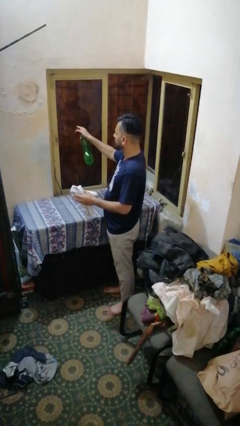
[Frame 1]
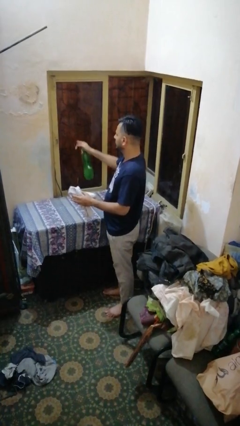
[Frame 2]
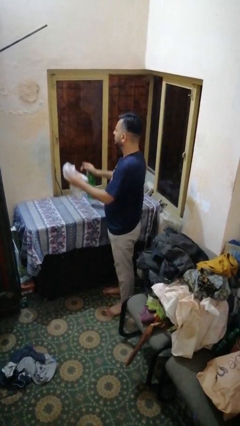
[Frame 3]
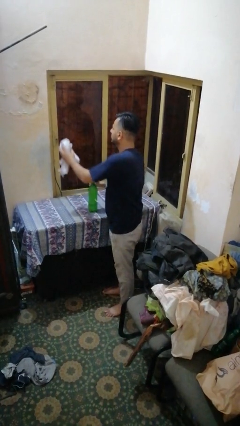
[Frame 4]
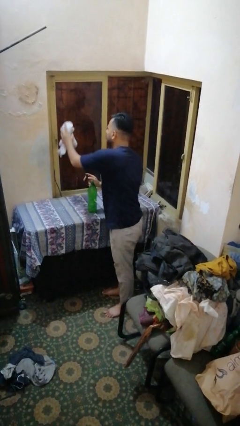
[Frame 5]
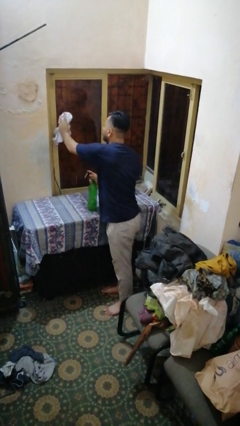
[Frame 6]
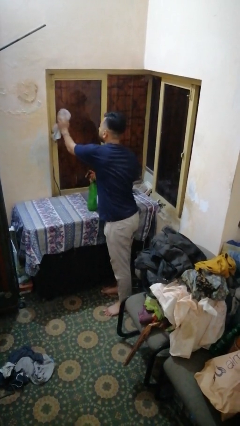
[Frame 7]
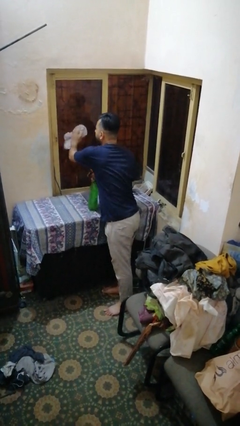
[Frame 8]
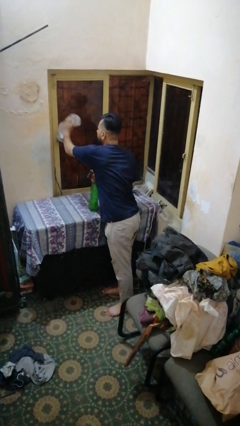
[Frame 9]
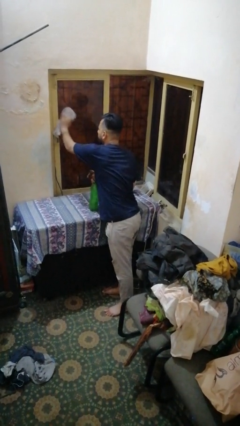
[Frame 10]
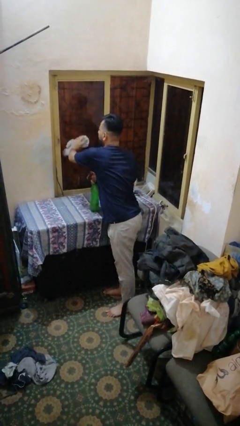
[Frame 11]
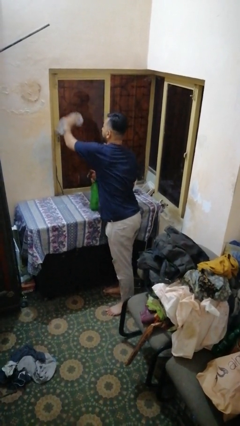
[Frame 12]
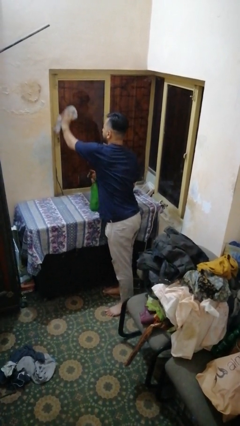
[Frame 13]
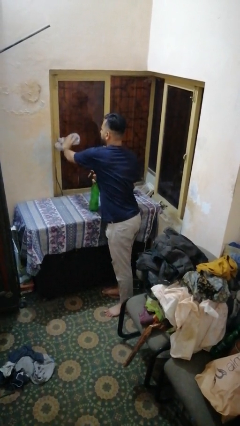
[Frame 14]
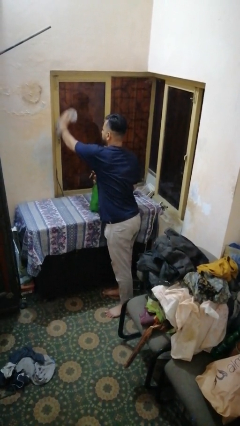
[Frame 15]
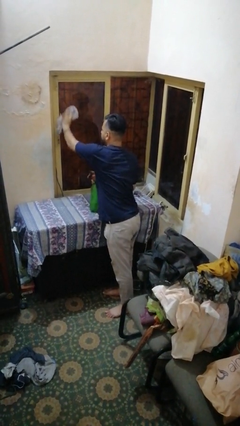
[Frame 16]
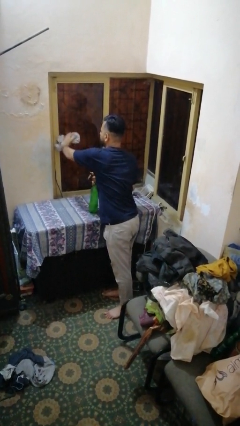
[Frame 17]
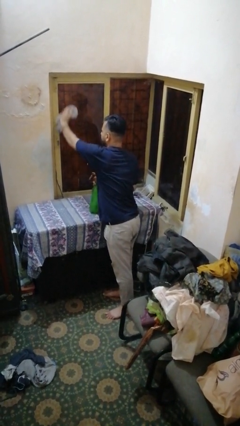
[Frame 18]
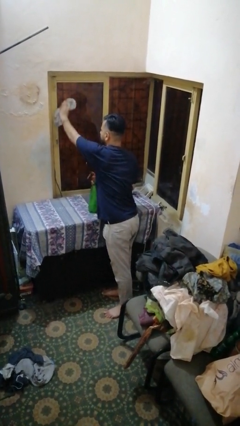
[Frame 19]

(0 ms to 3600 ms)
person washes window

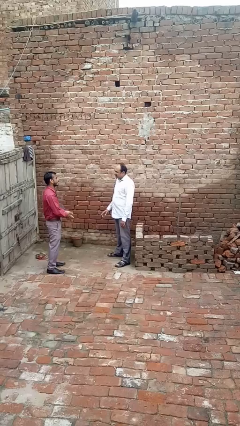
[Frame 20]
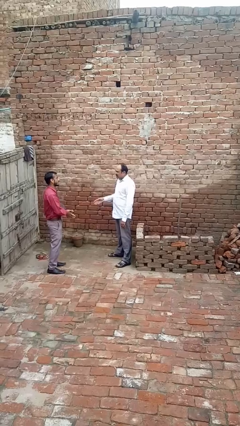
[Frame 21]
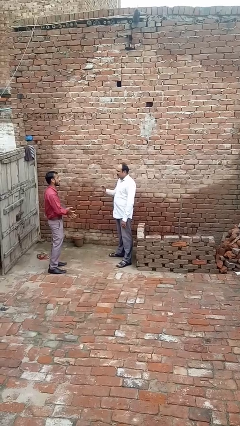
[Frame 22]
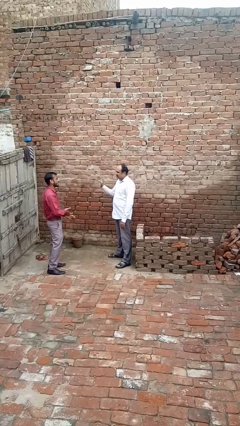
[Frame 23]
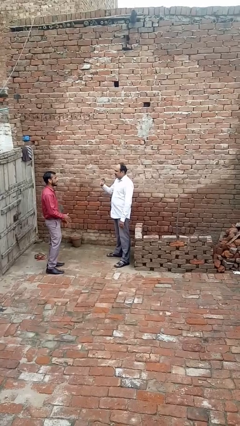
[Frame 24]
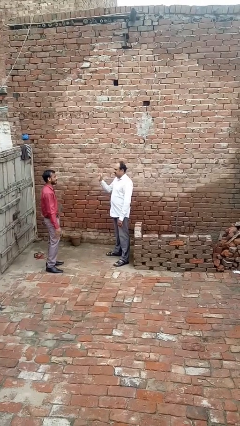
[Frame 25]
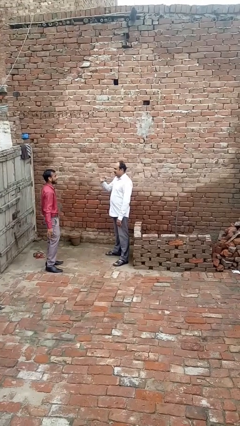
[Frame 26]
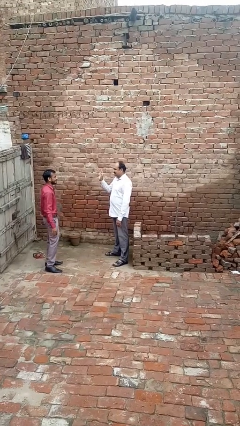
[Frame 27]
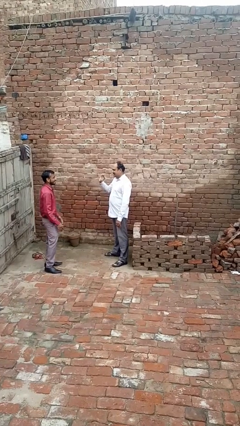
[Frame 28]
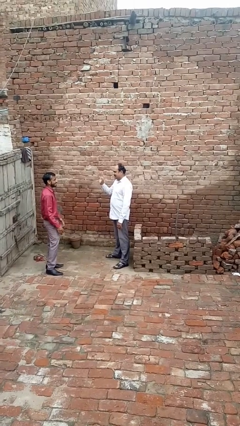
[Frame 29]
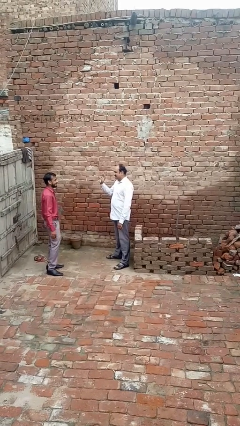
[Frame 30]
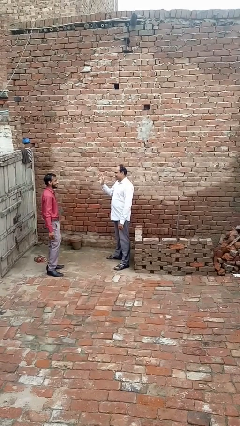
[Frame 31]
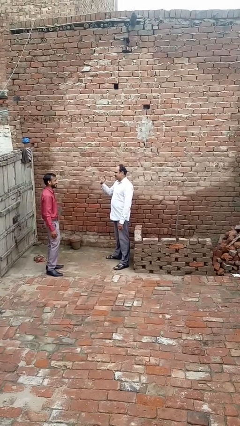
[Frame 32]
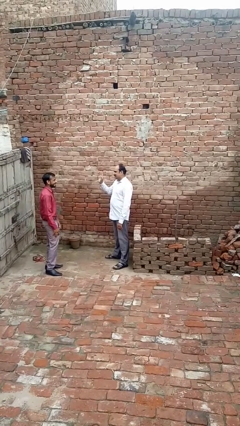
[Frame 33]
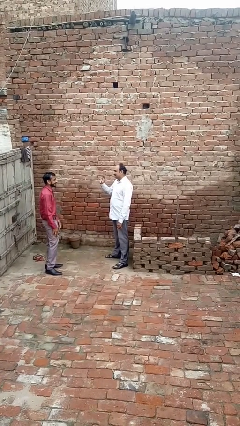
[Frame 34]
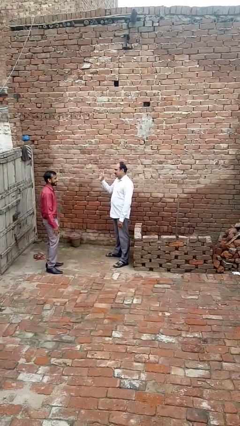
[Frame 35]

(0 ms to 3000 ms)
person waves at person

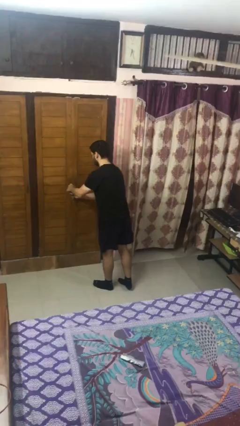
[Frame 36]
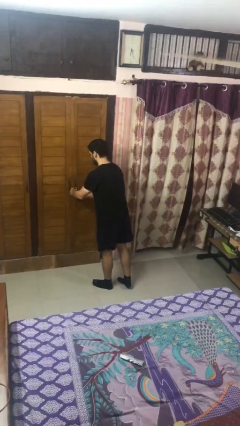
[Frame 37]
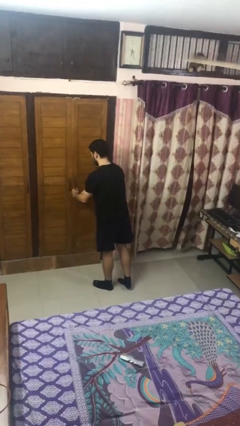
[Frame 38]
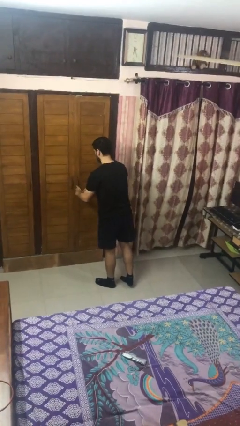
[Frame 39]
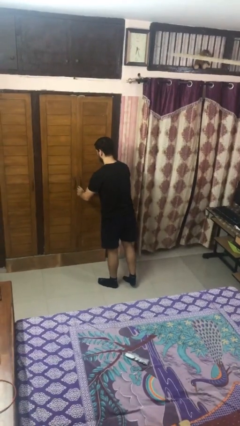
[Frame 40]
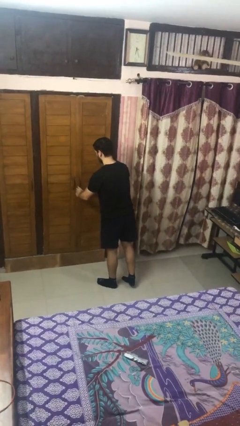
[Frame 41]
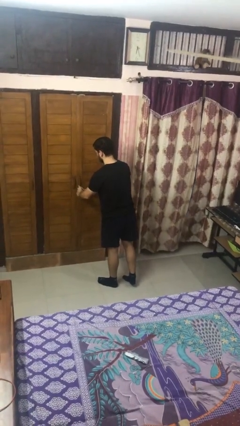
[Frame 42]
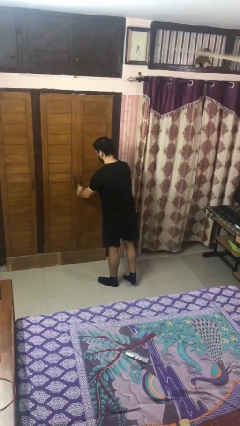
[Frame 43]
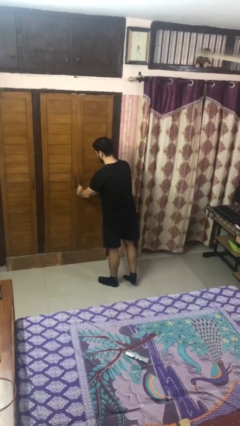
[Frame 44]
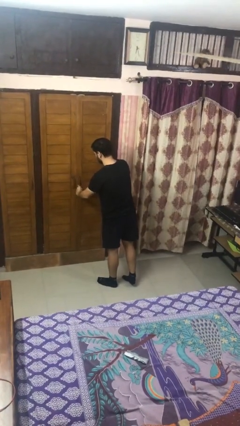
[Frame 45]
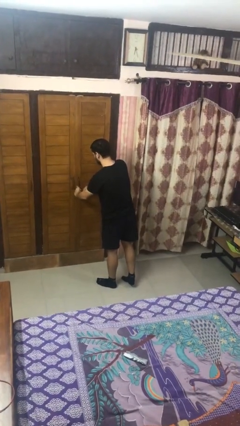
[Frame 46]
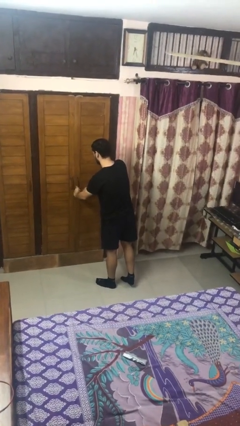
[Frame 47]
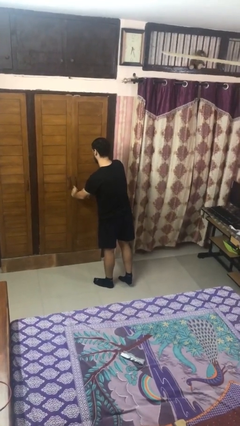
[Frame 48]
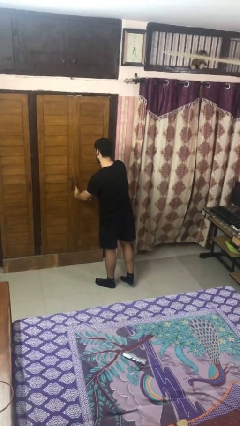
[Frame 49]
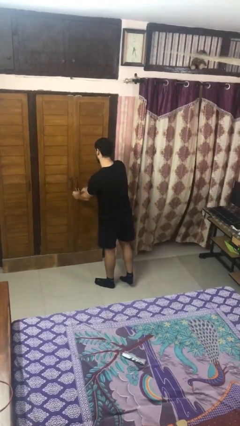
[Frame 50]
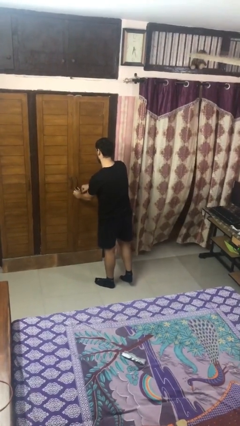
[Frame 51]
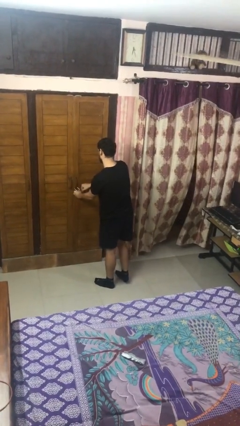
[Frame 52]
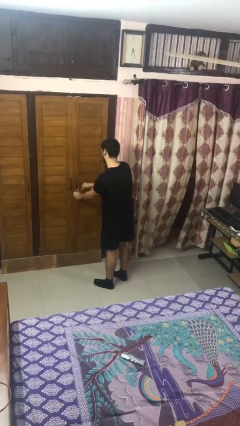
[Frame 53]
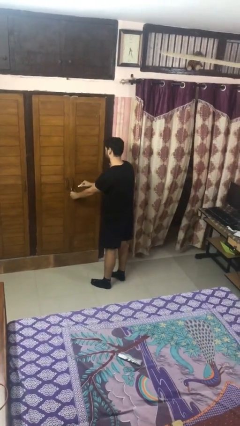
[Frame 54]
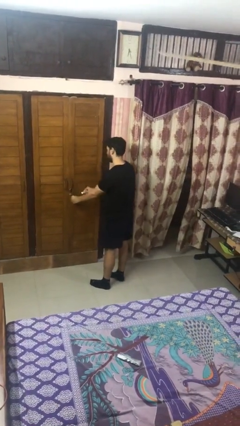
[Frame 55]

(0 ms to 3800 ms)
person locks door with keys

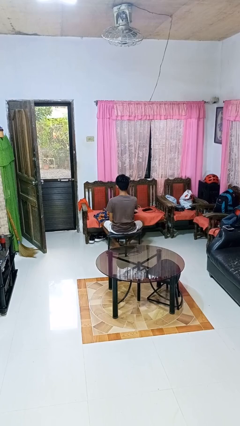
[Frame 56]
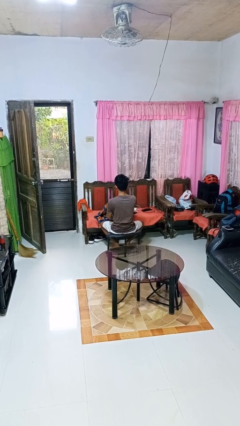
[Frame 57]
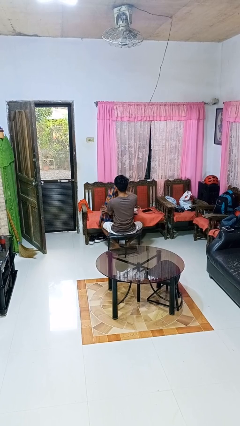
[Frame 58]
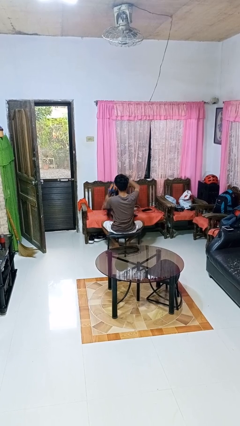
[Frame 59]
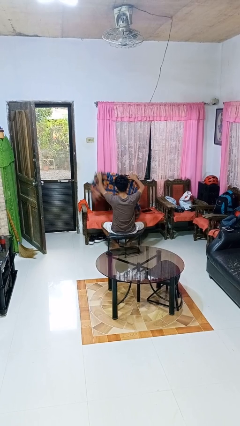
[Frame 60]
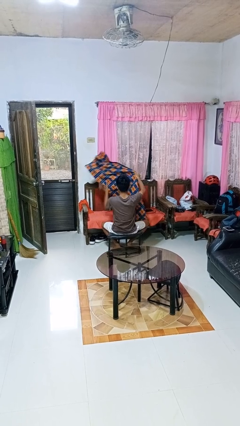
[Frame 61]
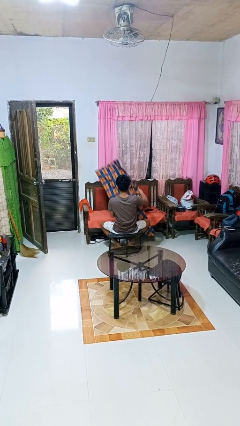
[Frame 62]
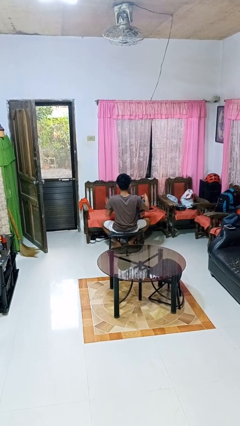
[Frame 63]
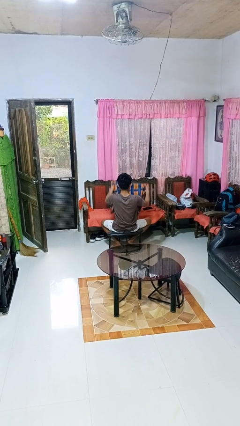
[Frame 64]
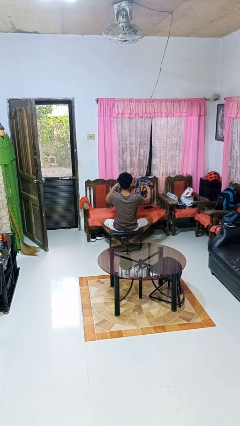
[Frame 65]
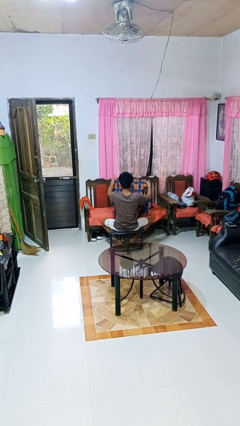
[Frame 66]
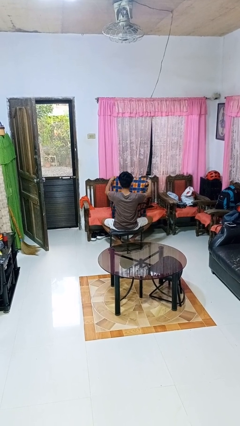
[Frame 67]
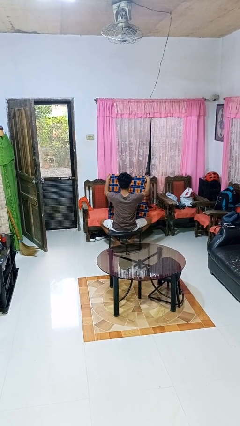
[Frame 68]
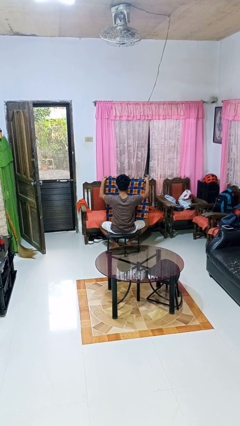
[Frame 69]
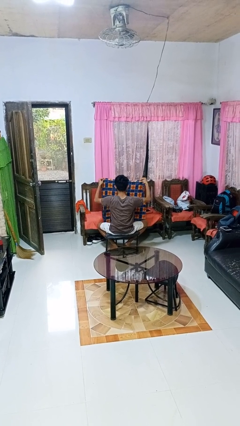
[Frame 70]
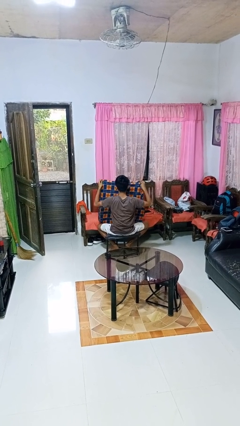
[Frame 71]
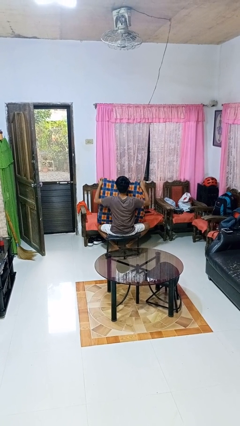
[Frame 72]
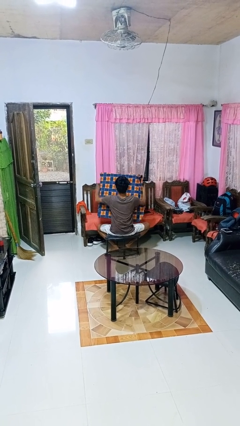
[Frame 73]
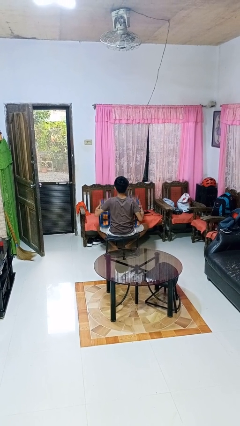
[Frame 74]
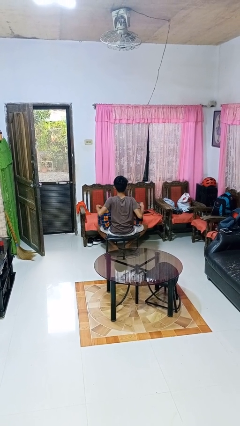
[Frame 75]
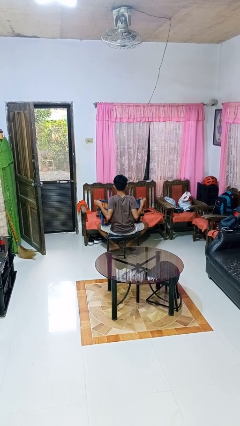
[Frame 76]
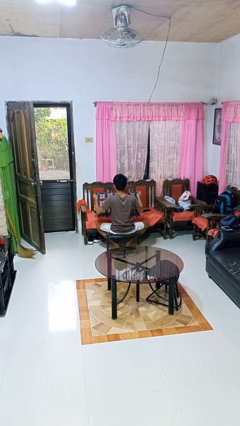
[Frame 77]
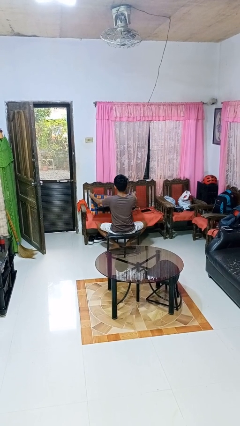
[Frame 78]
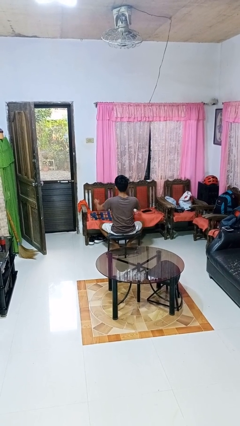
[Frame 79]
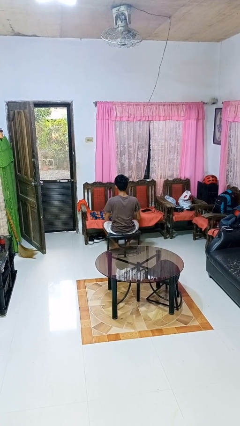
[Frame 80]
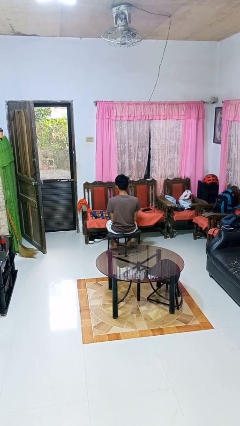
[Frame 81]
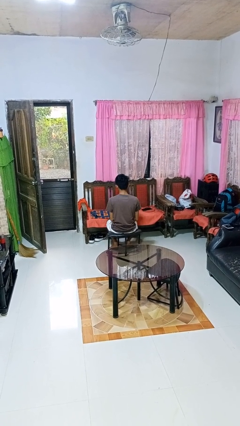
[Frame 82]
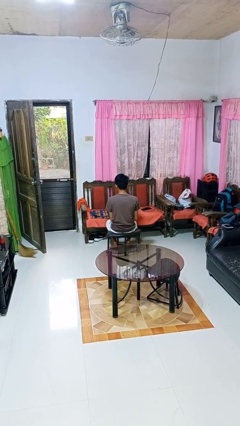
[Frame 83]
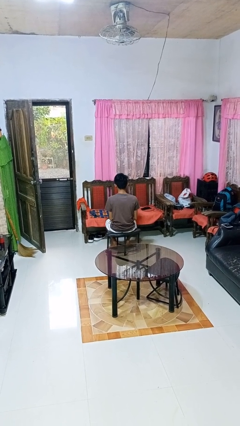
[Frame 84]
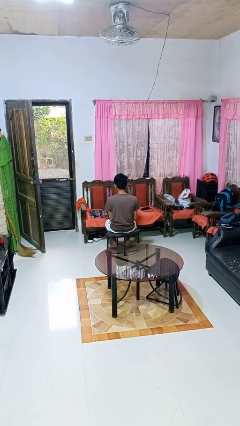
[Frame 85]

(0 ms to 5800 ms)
person folds blanket

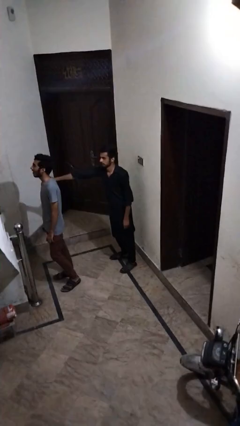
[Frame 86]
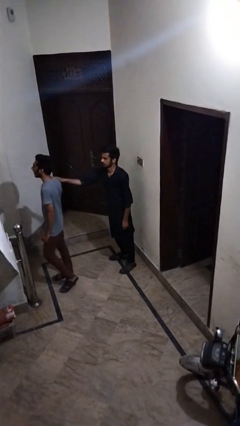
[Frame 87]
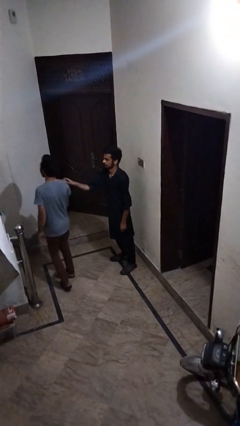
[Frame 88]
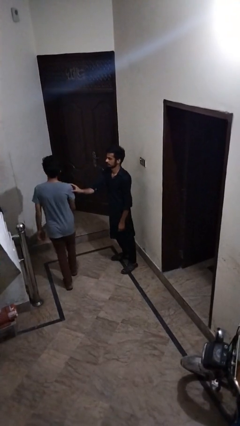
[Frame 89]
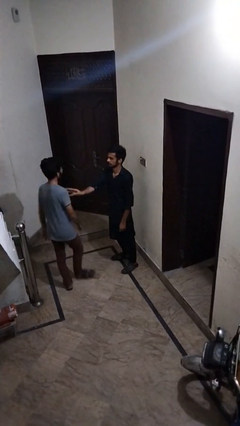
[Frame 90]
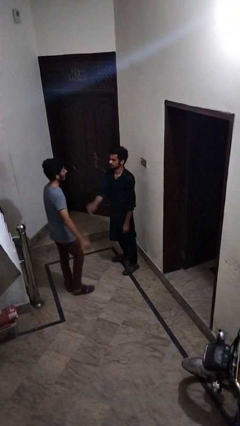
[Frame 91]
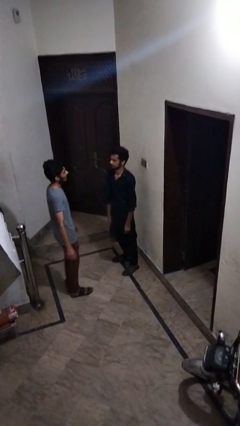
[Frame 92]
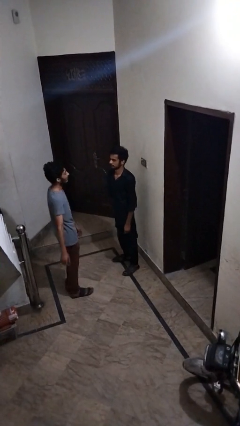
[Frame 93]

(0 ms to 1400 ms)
person spins person around
